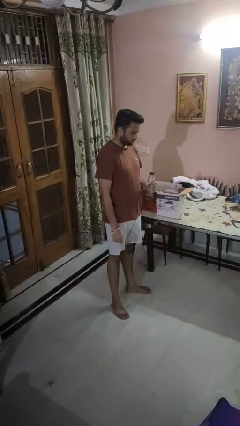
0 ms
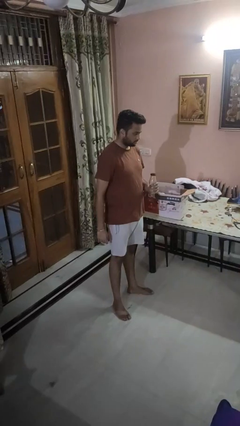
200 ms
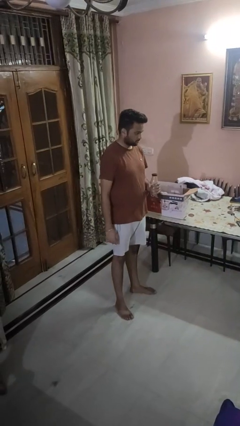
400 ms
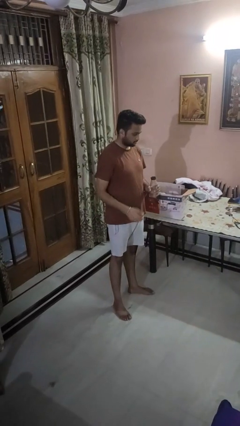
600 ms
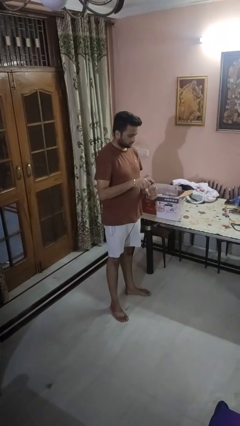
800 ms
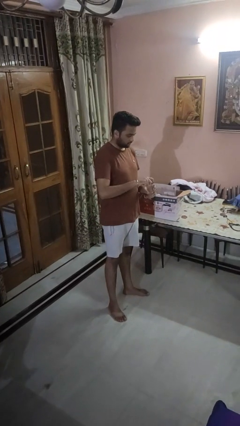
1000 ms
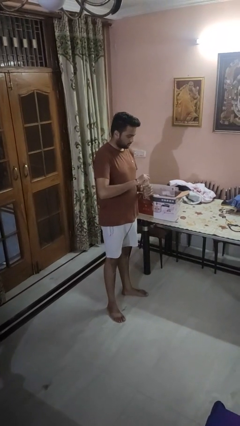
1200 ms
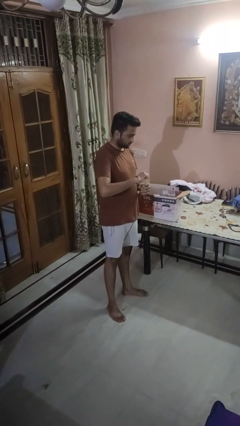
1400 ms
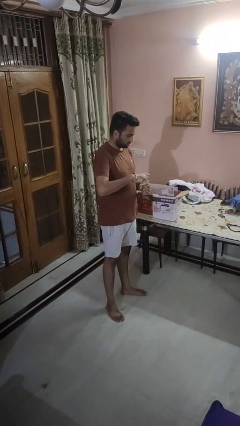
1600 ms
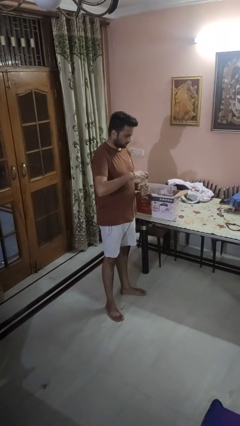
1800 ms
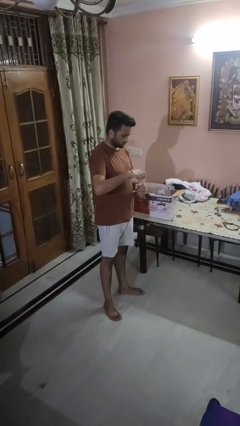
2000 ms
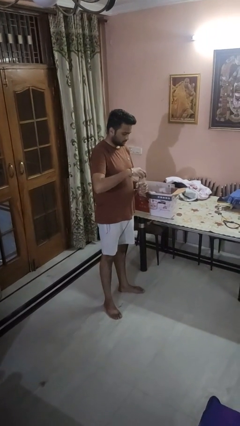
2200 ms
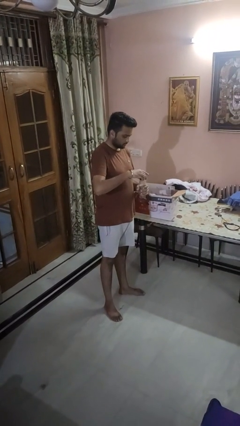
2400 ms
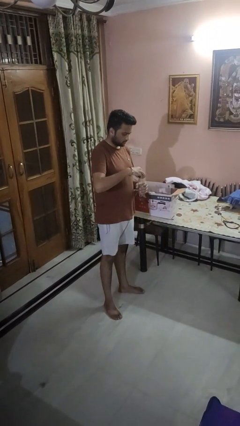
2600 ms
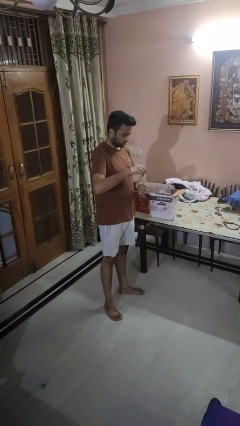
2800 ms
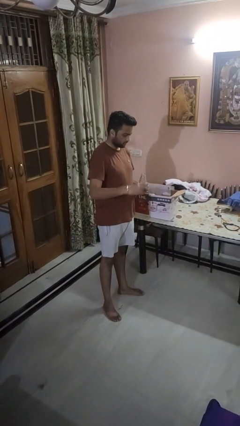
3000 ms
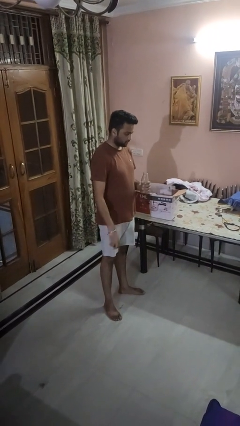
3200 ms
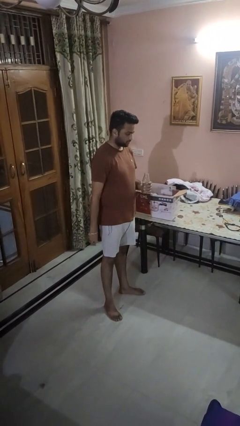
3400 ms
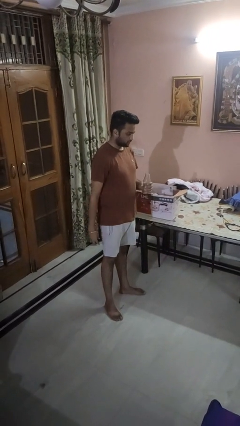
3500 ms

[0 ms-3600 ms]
person unscrews lid from bottle

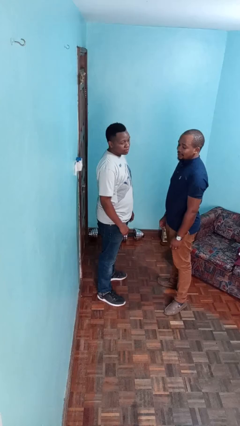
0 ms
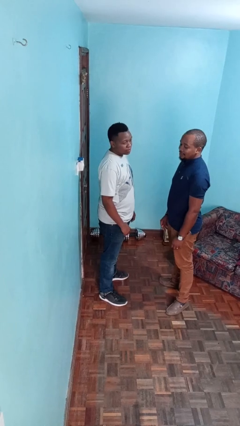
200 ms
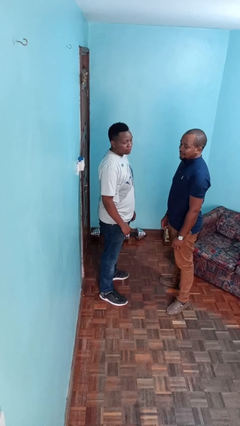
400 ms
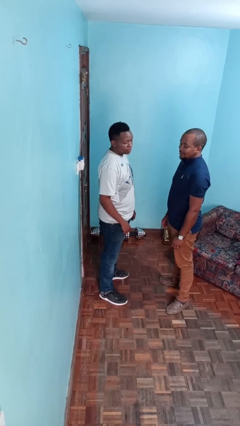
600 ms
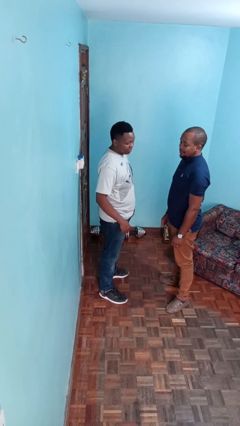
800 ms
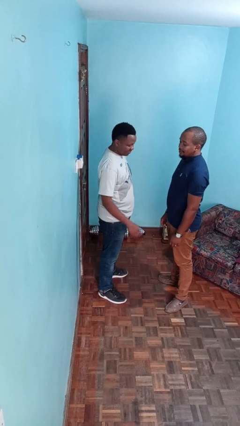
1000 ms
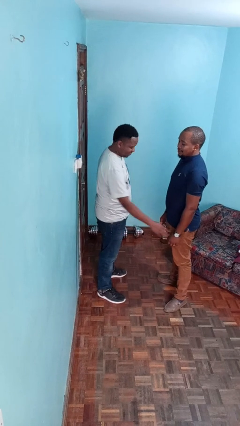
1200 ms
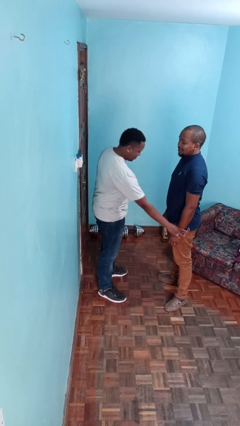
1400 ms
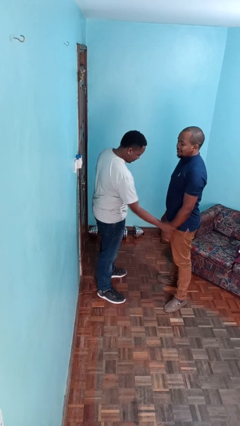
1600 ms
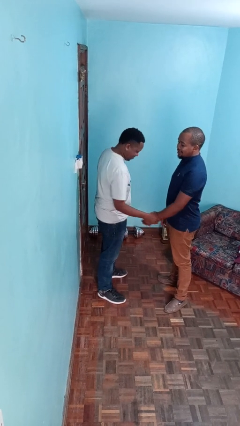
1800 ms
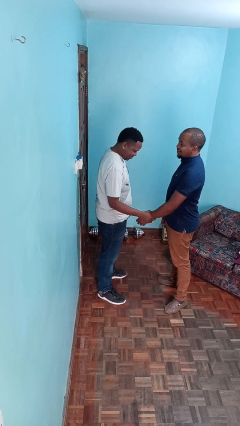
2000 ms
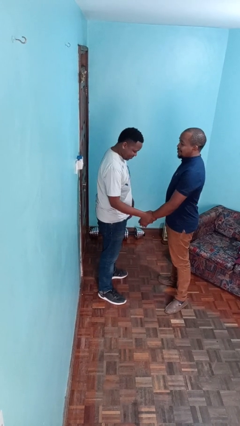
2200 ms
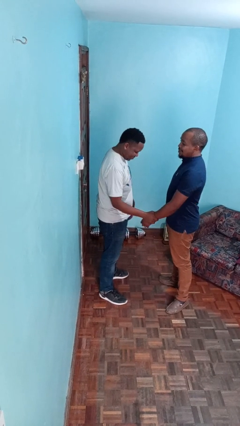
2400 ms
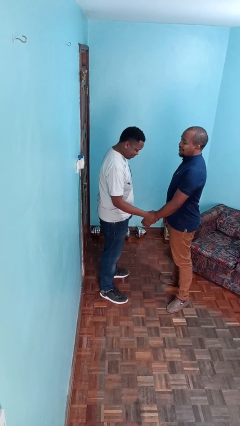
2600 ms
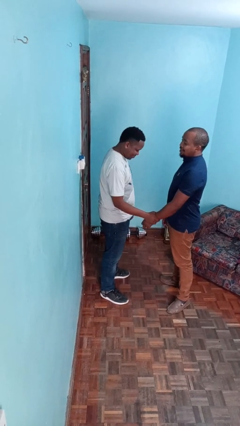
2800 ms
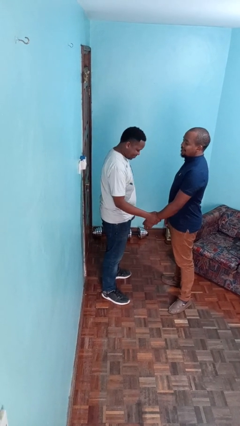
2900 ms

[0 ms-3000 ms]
person grabs person by forearm

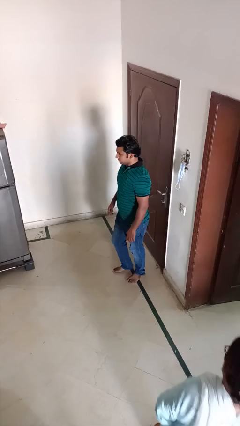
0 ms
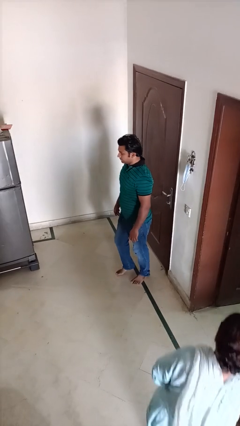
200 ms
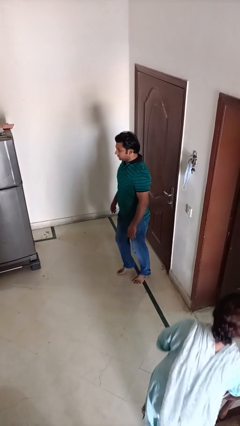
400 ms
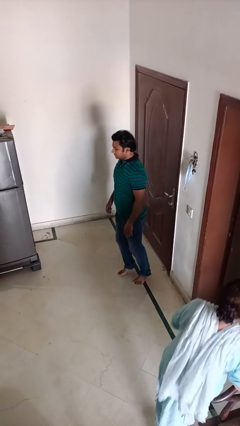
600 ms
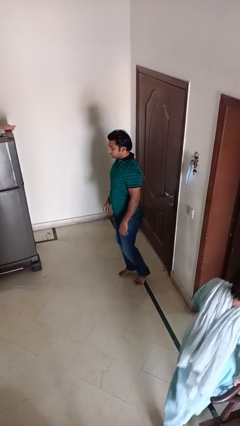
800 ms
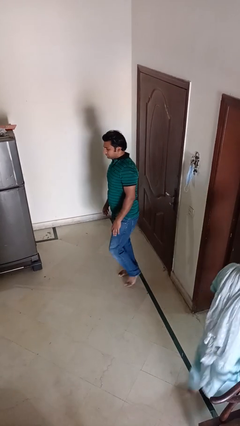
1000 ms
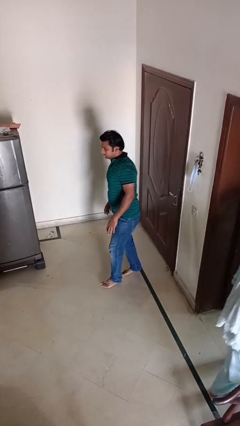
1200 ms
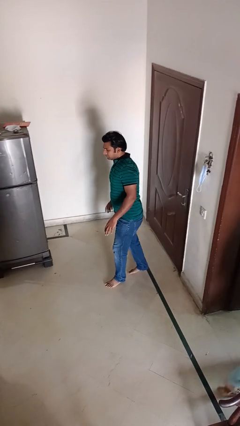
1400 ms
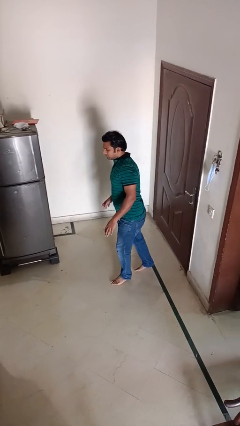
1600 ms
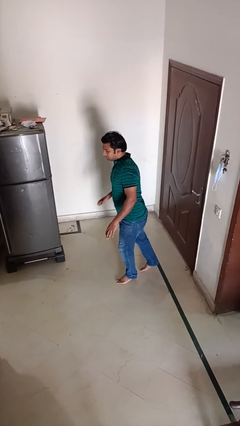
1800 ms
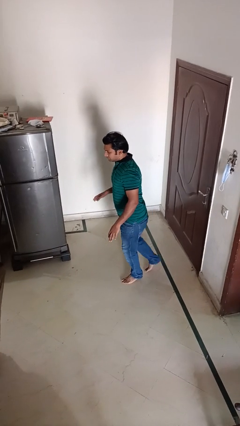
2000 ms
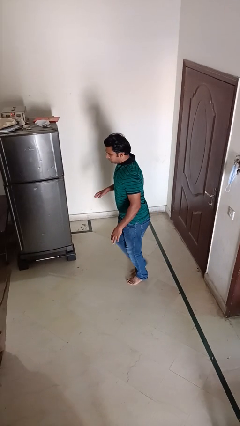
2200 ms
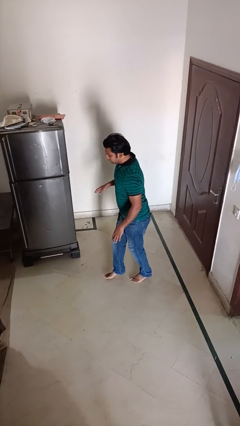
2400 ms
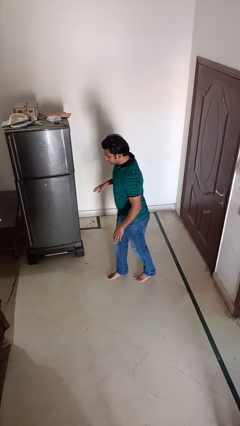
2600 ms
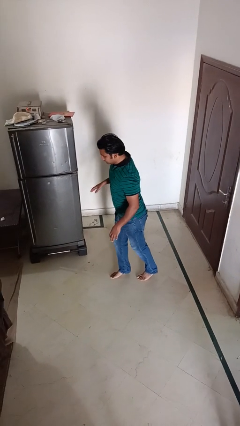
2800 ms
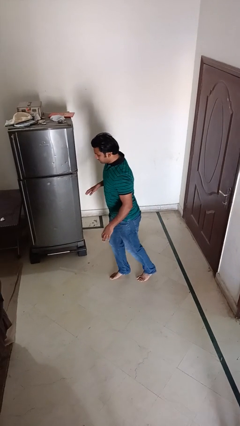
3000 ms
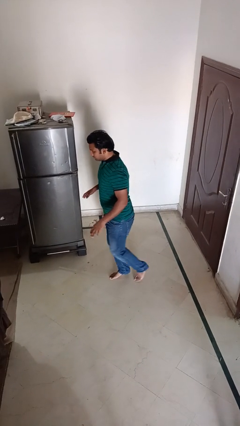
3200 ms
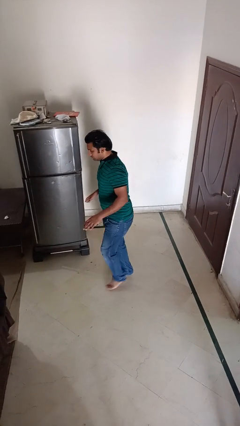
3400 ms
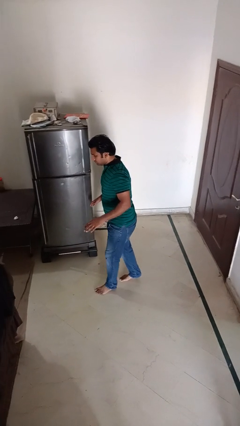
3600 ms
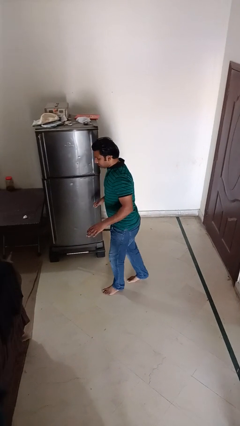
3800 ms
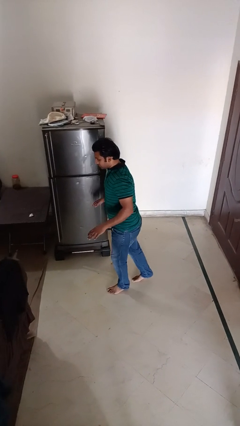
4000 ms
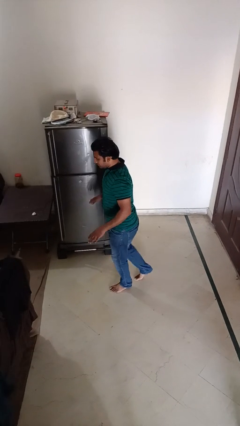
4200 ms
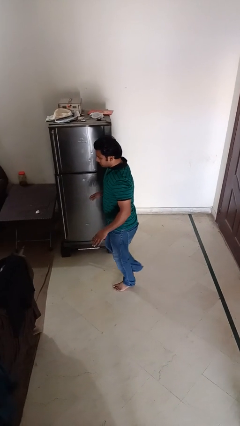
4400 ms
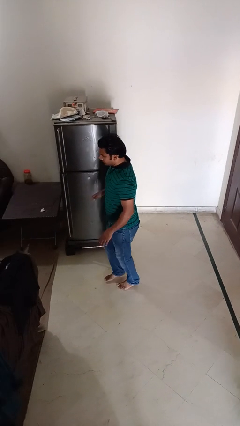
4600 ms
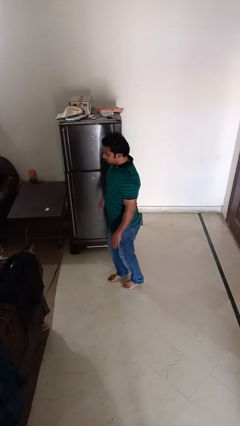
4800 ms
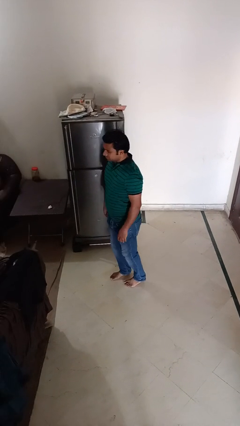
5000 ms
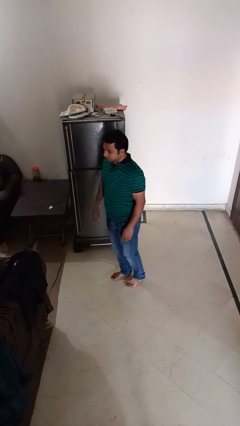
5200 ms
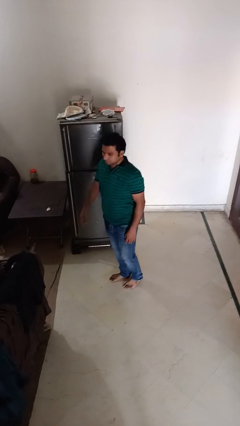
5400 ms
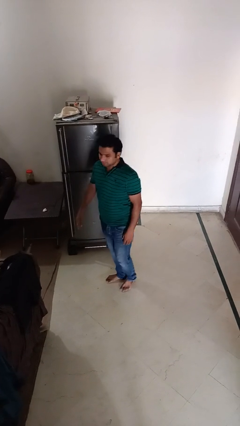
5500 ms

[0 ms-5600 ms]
person walks tiptoe

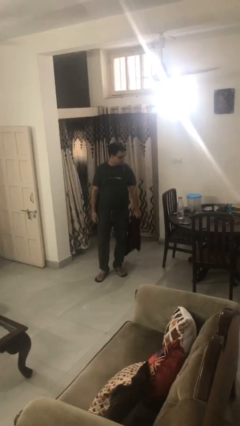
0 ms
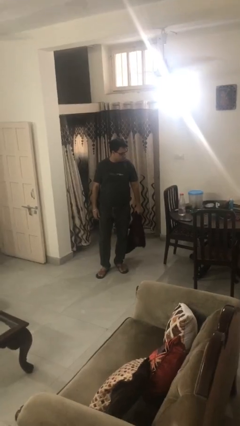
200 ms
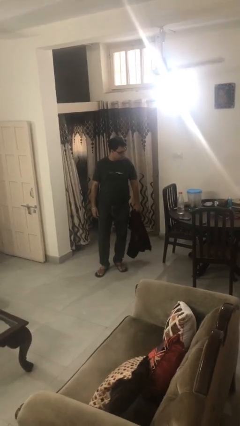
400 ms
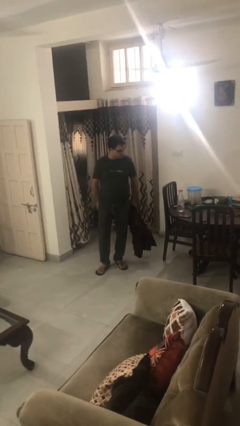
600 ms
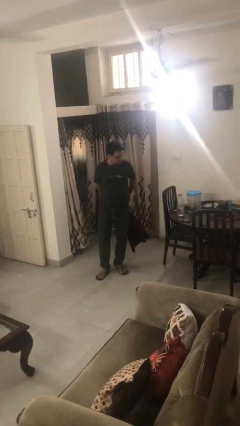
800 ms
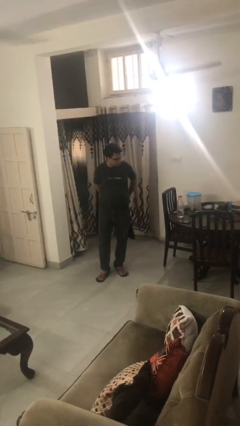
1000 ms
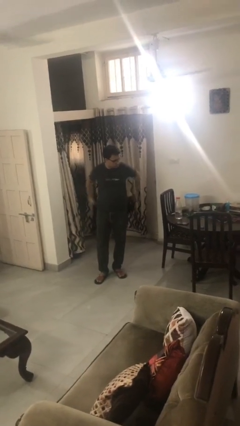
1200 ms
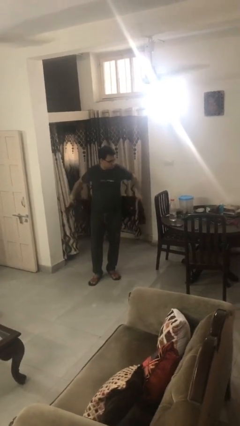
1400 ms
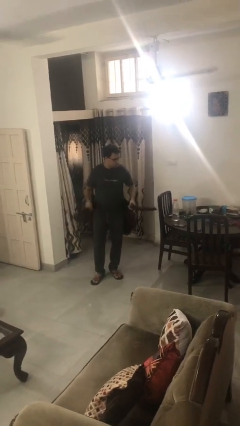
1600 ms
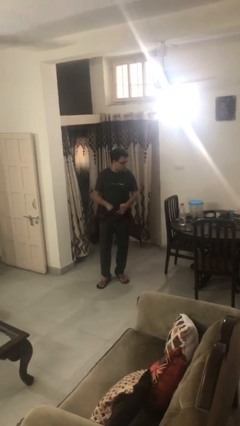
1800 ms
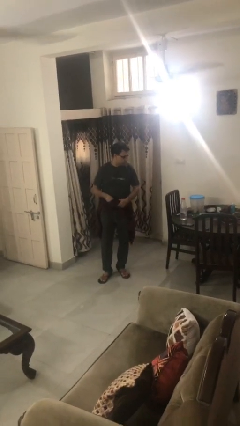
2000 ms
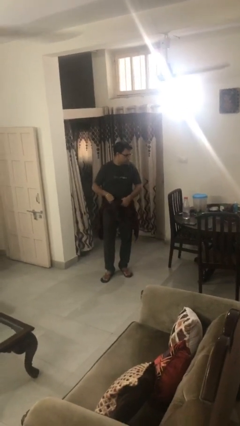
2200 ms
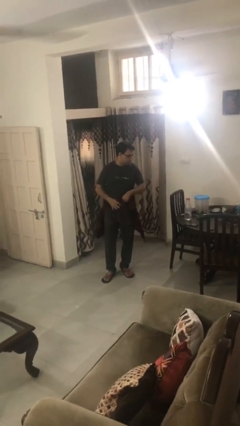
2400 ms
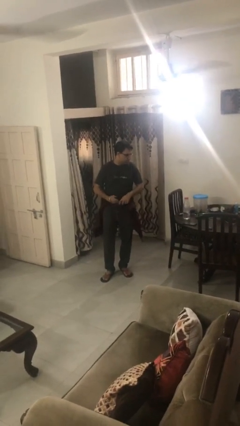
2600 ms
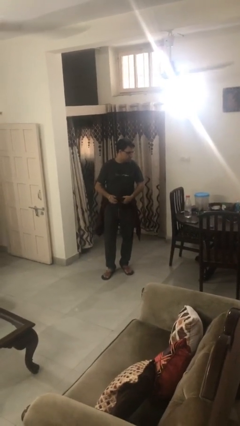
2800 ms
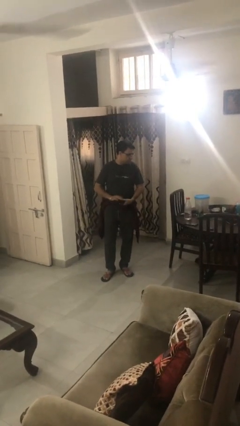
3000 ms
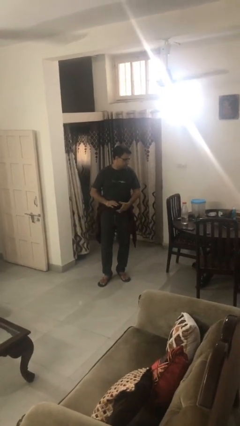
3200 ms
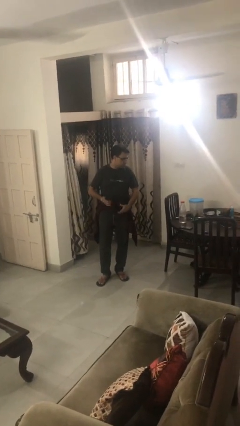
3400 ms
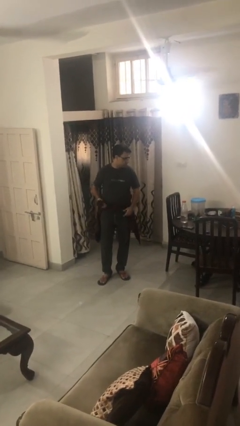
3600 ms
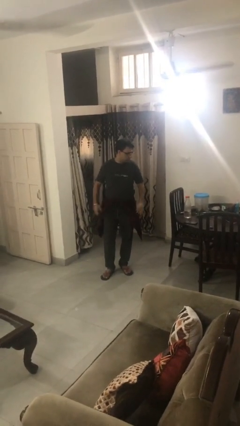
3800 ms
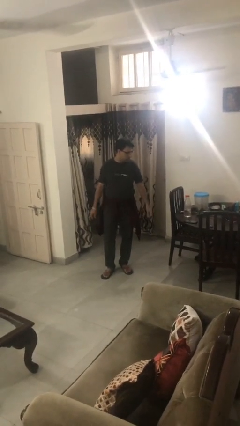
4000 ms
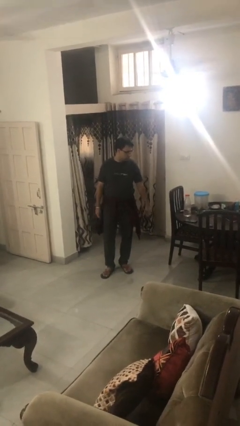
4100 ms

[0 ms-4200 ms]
person ties jacket around waist

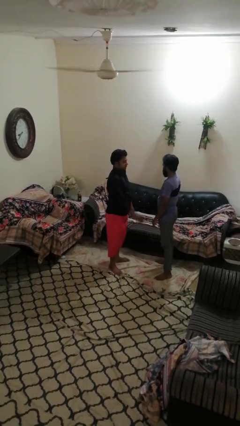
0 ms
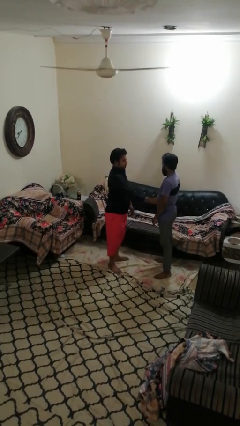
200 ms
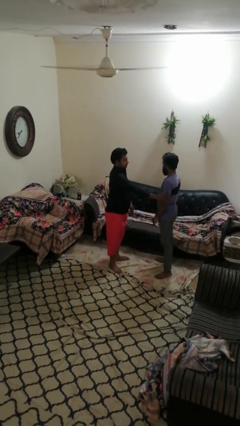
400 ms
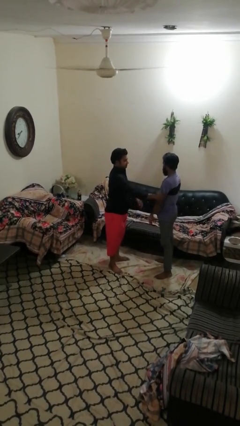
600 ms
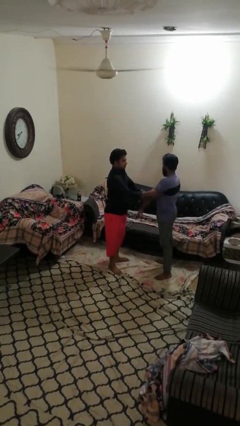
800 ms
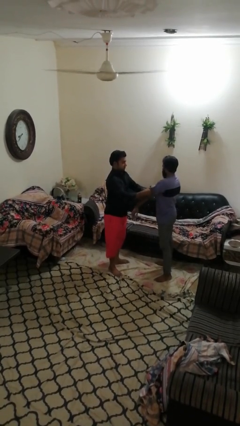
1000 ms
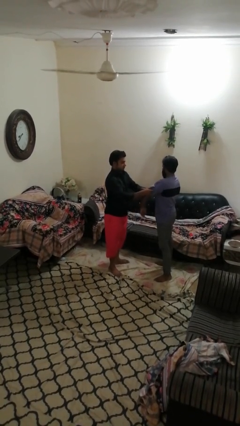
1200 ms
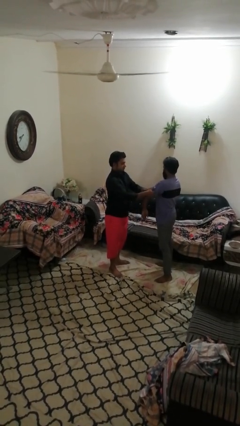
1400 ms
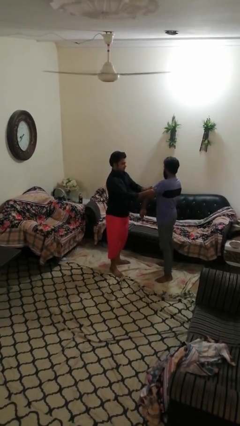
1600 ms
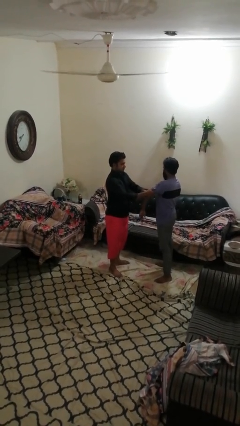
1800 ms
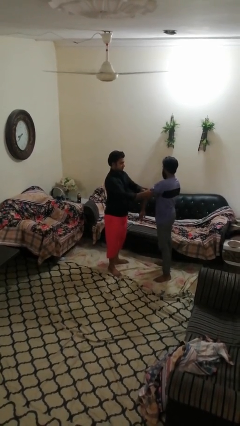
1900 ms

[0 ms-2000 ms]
person grabs person by bicep
